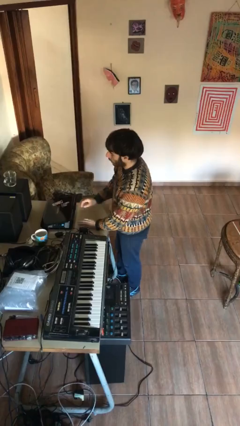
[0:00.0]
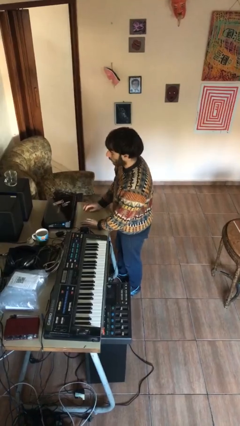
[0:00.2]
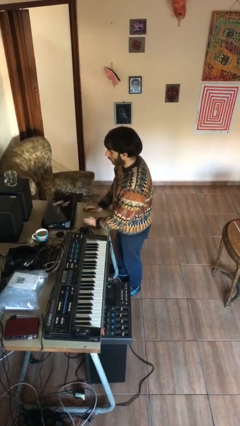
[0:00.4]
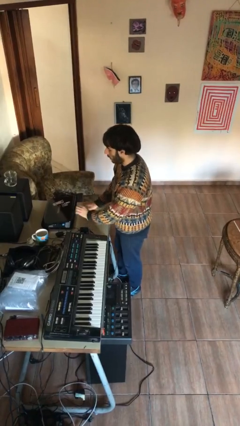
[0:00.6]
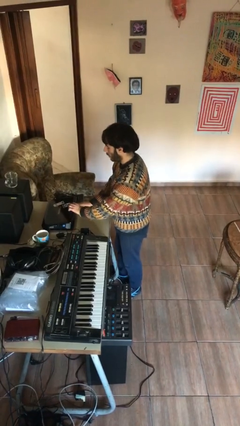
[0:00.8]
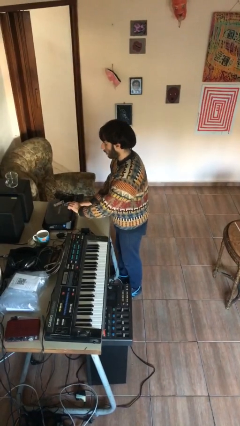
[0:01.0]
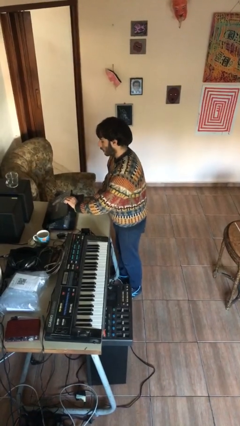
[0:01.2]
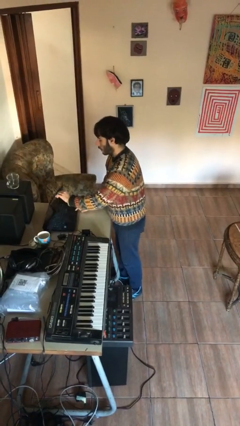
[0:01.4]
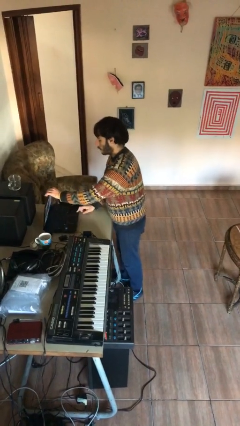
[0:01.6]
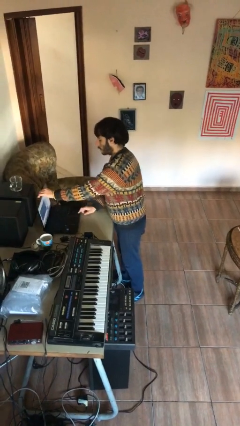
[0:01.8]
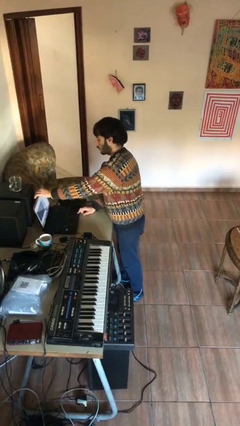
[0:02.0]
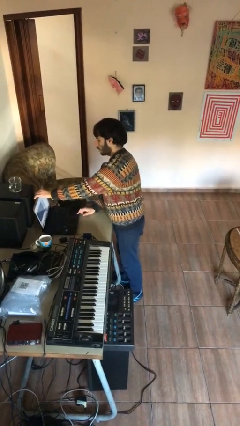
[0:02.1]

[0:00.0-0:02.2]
person opens laptop

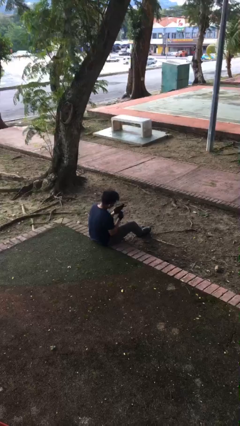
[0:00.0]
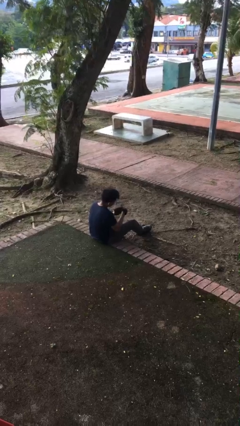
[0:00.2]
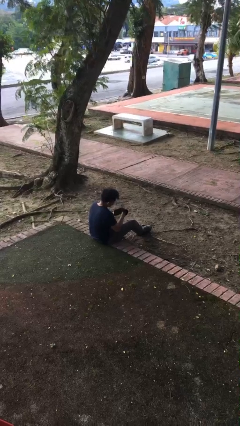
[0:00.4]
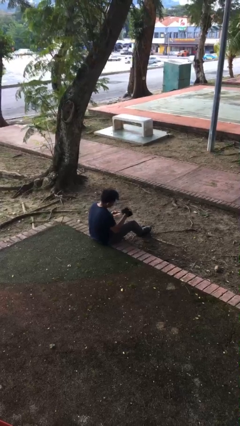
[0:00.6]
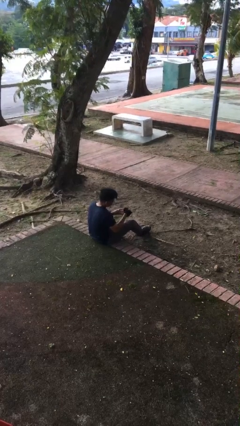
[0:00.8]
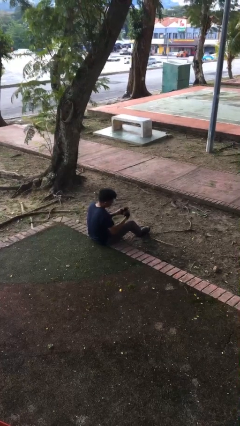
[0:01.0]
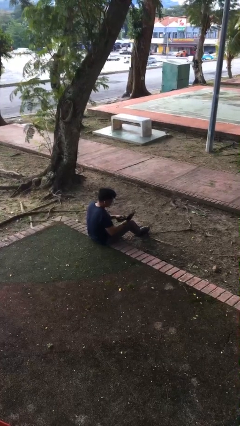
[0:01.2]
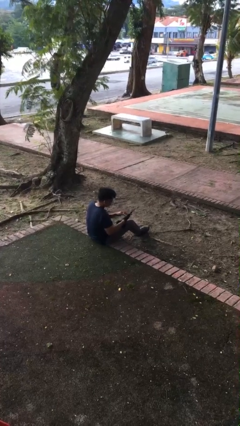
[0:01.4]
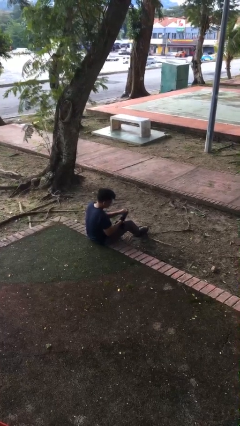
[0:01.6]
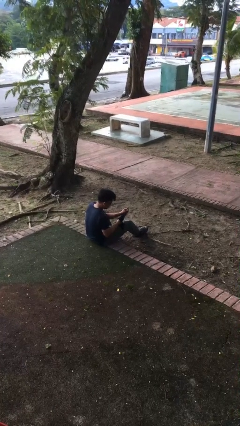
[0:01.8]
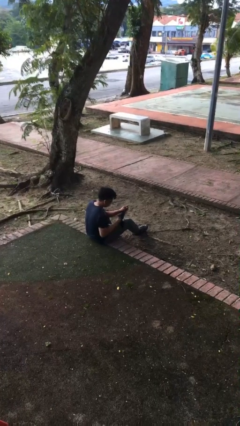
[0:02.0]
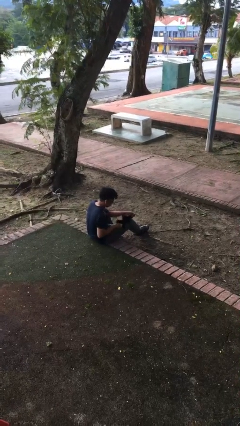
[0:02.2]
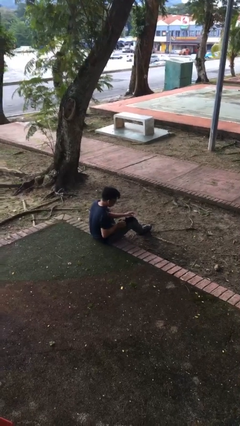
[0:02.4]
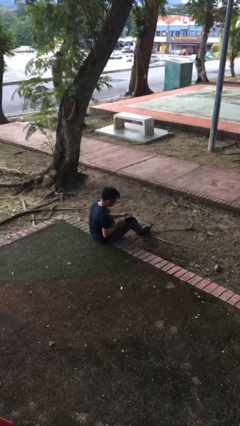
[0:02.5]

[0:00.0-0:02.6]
person takes off gloves

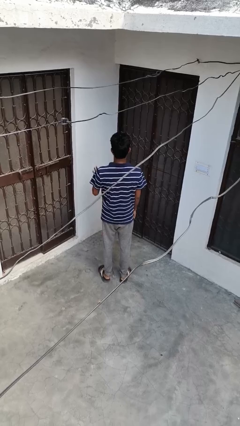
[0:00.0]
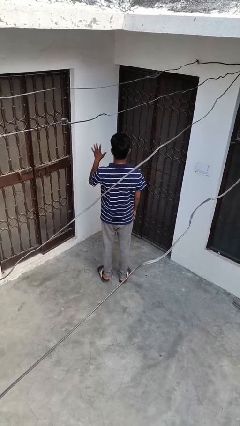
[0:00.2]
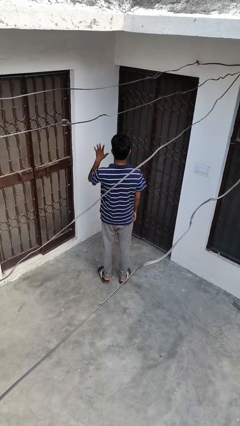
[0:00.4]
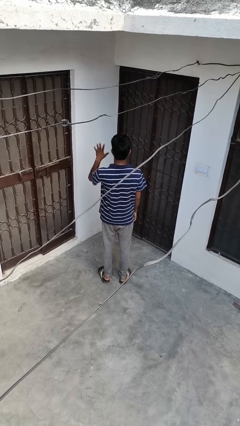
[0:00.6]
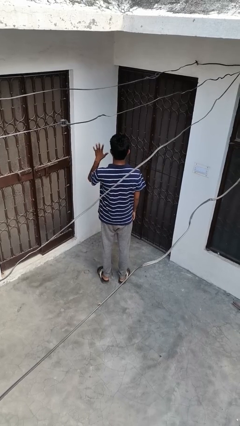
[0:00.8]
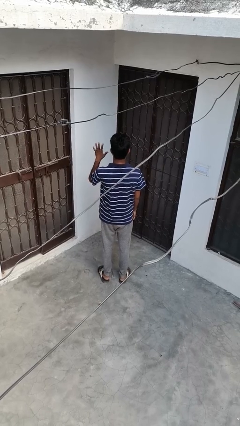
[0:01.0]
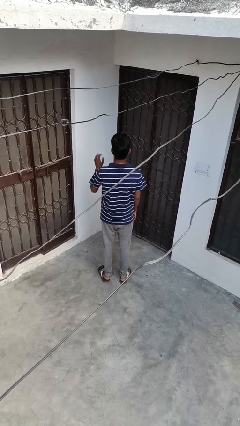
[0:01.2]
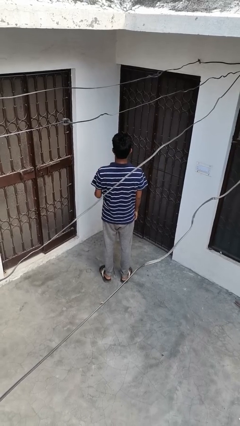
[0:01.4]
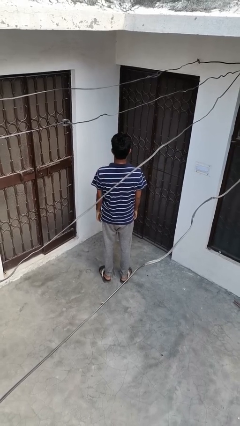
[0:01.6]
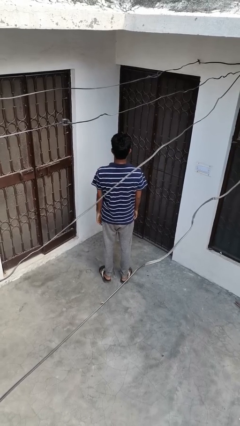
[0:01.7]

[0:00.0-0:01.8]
person gestures number five

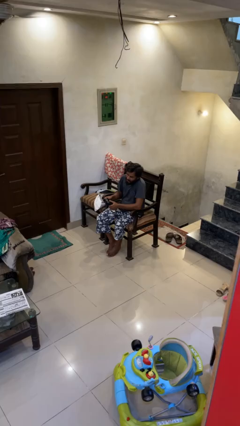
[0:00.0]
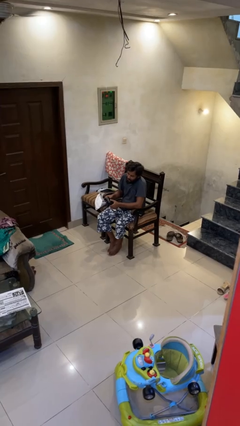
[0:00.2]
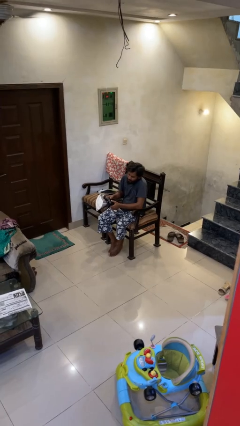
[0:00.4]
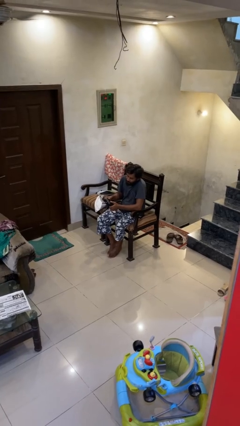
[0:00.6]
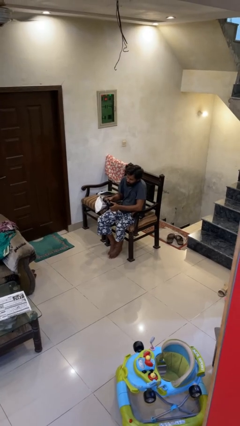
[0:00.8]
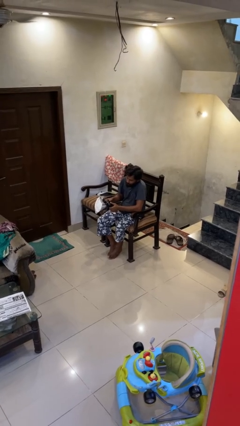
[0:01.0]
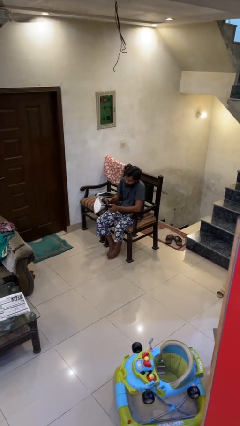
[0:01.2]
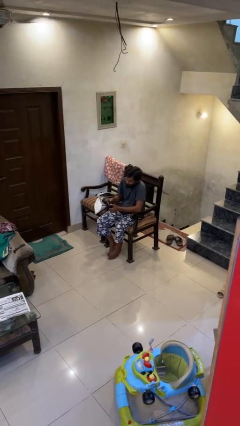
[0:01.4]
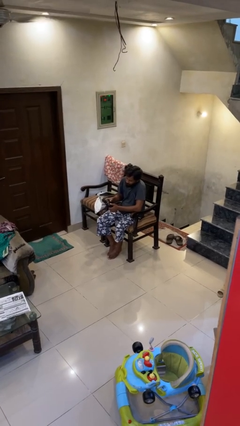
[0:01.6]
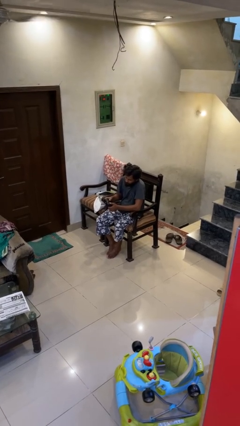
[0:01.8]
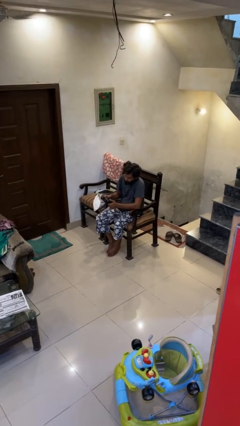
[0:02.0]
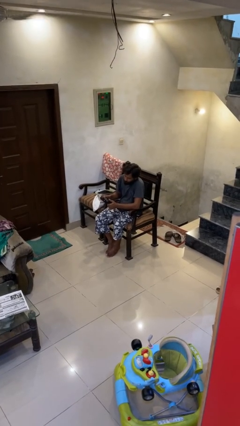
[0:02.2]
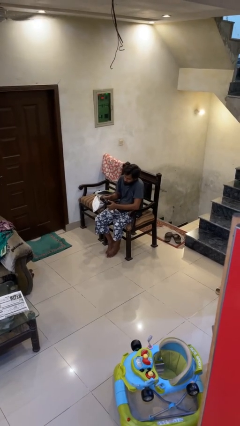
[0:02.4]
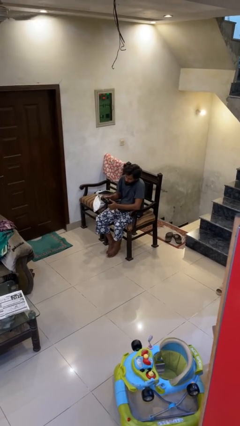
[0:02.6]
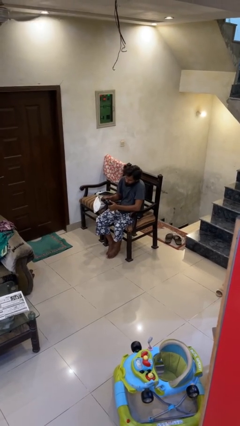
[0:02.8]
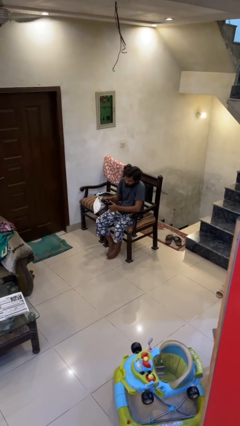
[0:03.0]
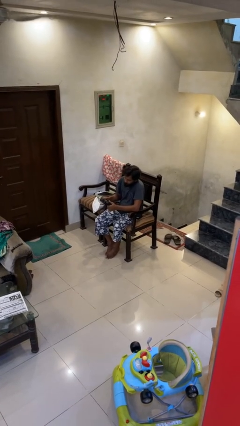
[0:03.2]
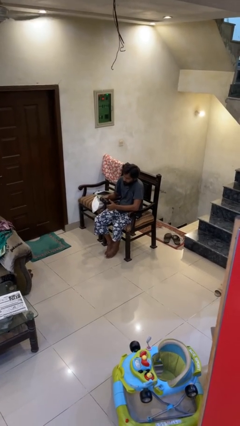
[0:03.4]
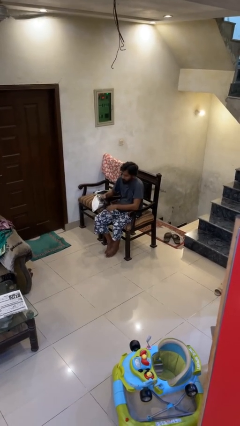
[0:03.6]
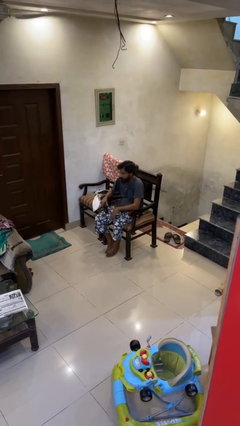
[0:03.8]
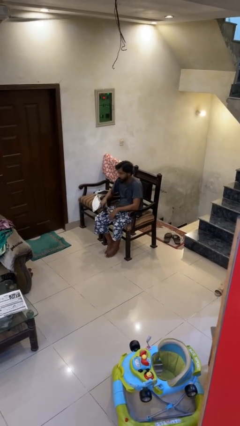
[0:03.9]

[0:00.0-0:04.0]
person interacts with handheld game

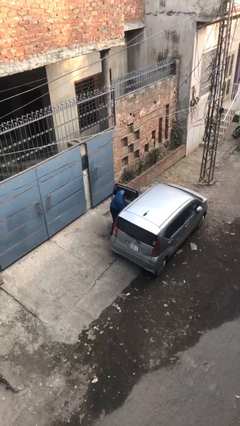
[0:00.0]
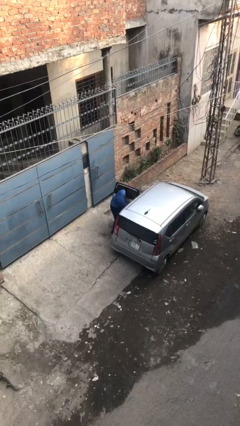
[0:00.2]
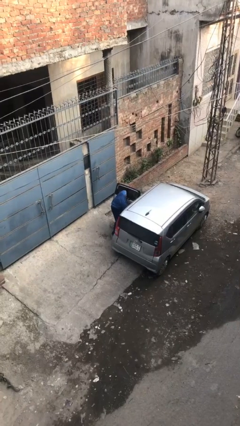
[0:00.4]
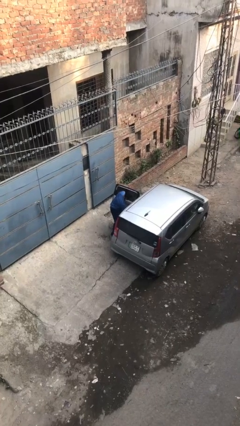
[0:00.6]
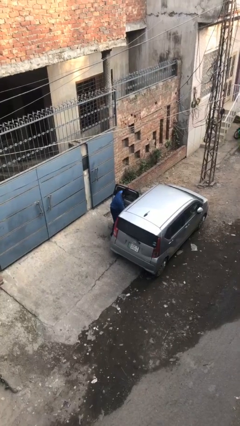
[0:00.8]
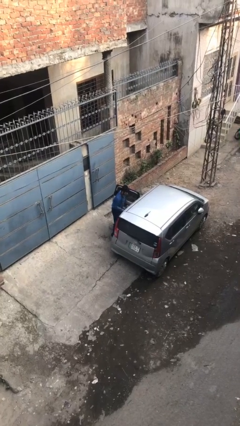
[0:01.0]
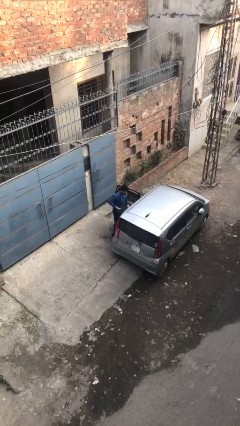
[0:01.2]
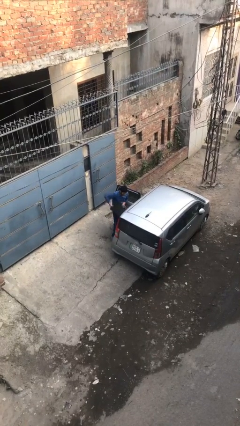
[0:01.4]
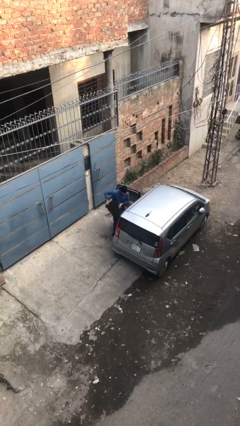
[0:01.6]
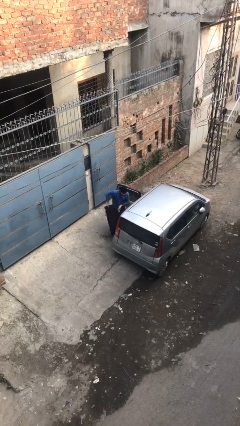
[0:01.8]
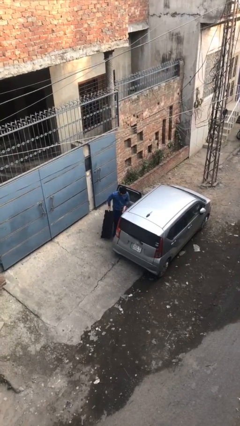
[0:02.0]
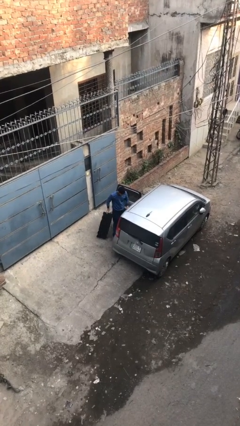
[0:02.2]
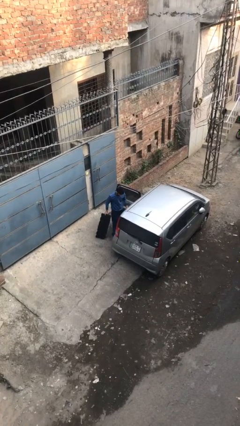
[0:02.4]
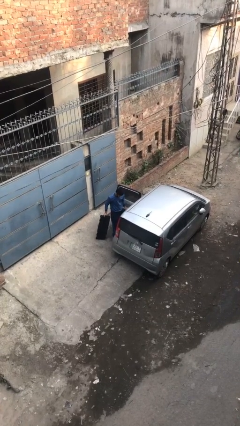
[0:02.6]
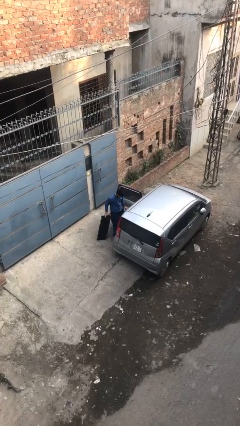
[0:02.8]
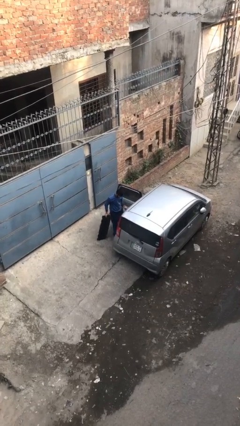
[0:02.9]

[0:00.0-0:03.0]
person unloads car

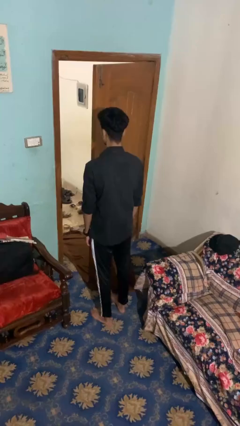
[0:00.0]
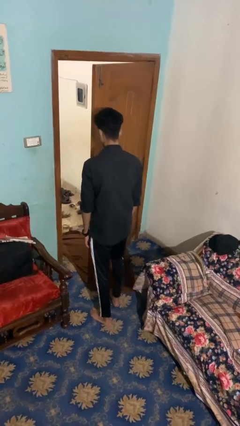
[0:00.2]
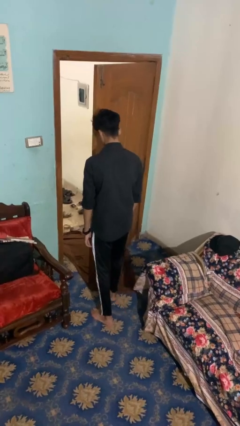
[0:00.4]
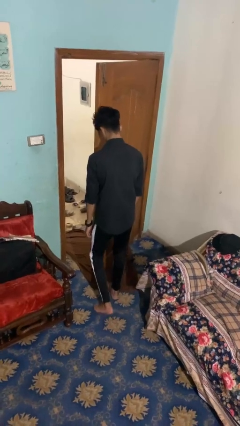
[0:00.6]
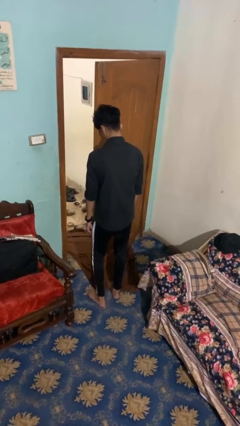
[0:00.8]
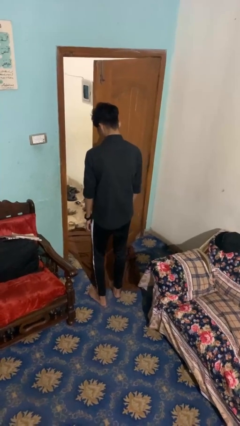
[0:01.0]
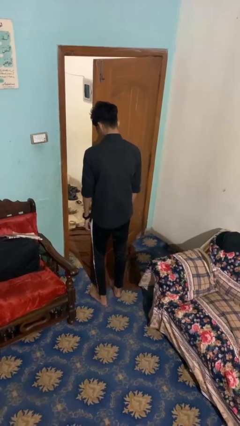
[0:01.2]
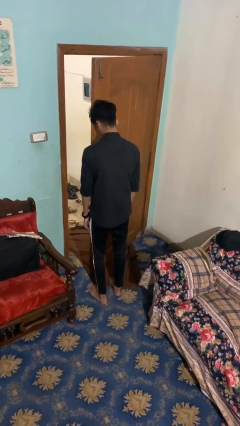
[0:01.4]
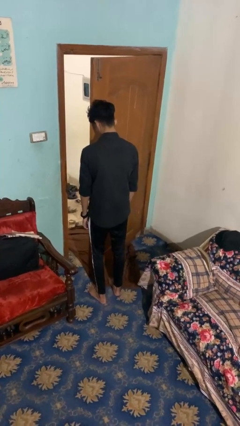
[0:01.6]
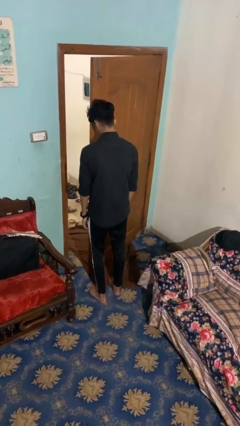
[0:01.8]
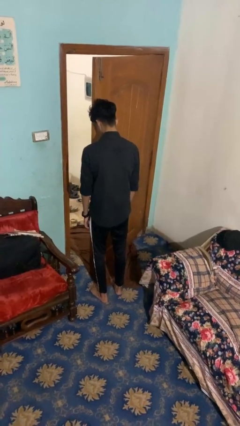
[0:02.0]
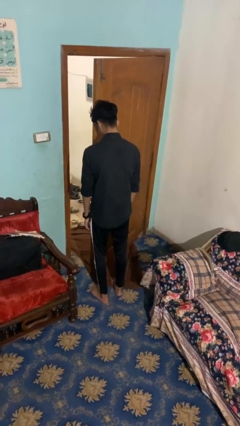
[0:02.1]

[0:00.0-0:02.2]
person bumps into wall

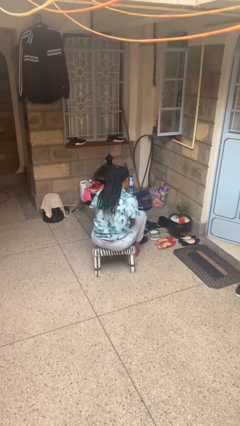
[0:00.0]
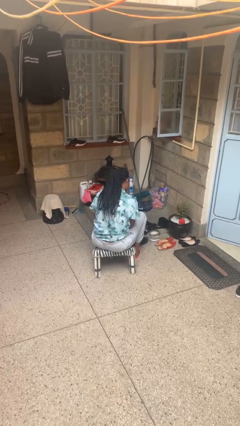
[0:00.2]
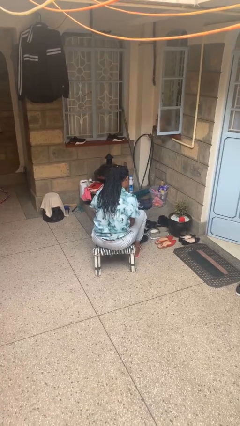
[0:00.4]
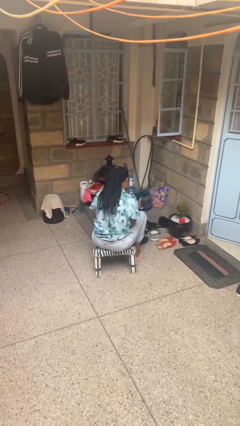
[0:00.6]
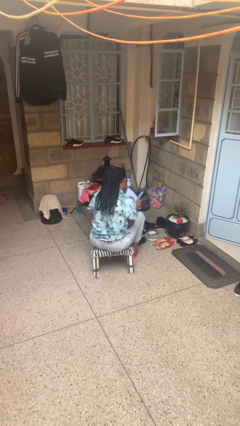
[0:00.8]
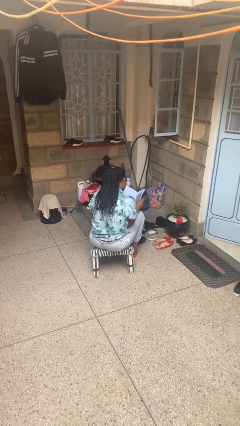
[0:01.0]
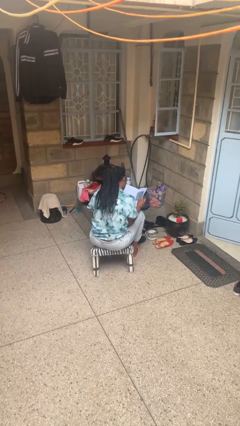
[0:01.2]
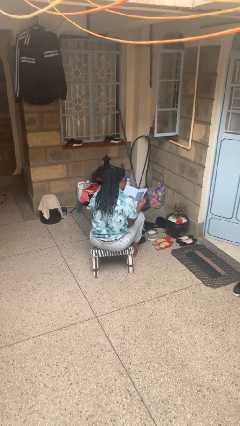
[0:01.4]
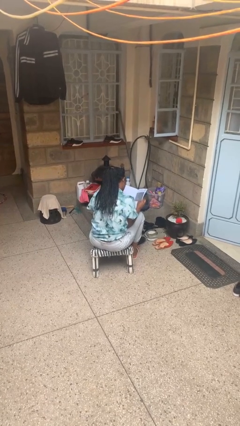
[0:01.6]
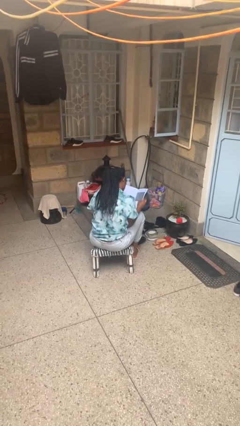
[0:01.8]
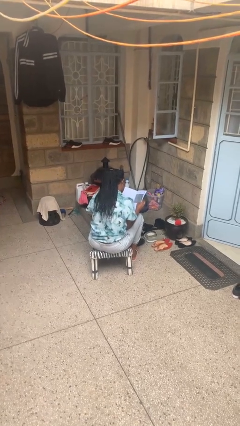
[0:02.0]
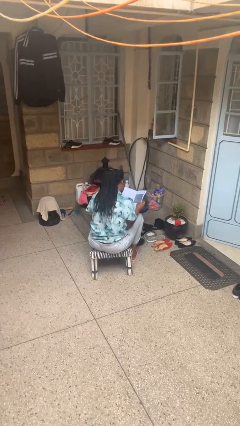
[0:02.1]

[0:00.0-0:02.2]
person reads magazine
